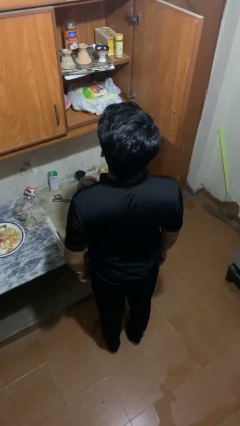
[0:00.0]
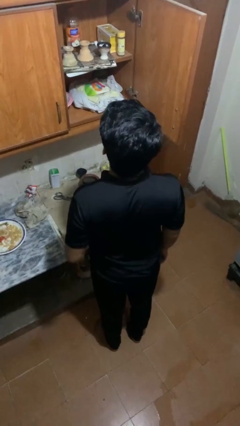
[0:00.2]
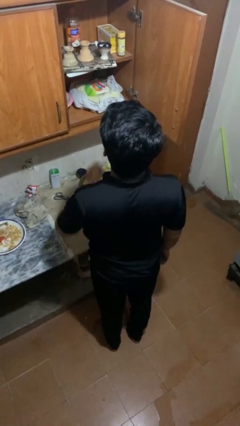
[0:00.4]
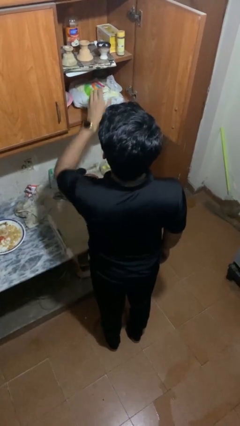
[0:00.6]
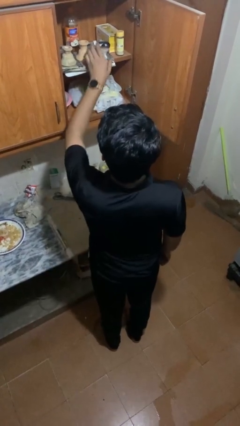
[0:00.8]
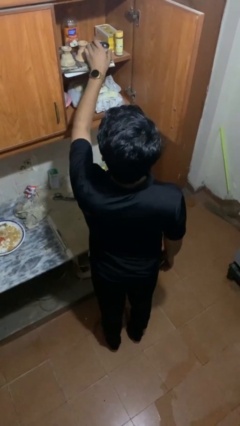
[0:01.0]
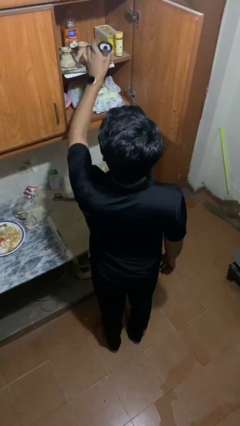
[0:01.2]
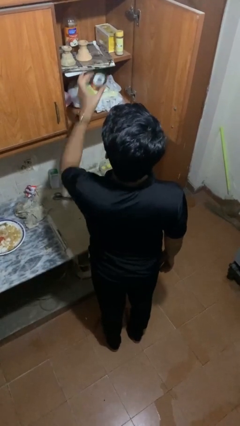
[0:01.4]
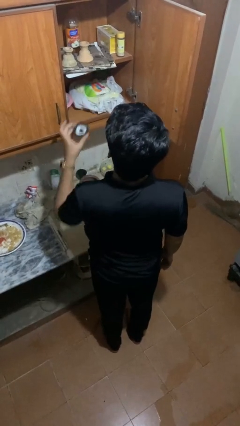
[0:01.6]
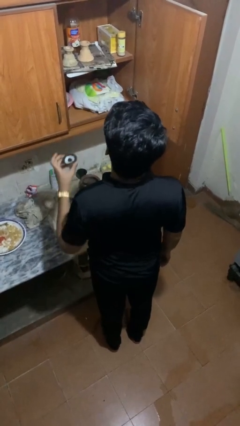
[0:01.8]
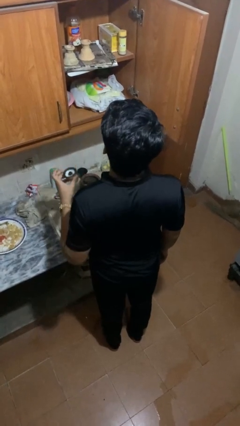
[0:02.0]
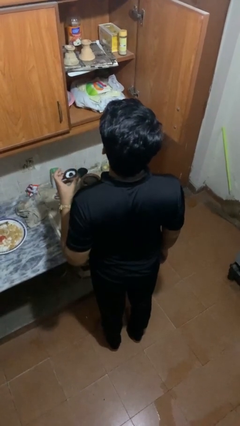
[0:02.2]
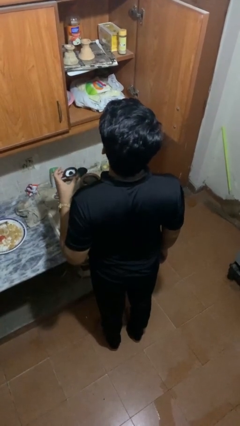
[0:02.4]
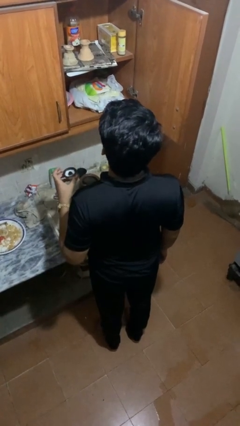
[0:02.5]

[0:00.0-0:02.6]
person takes object from cabinet

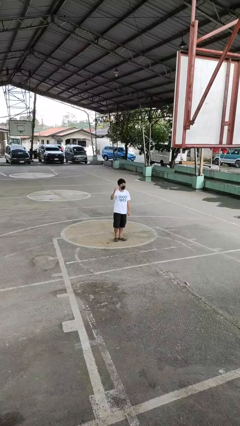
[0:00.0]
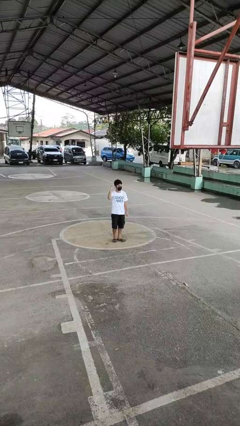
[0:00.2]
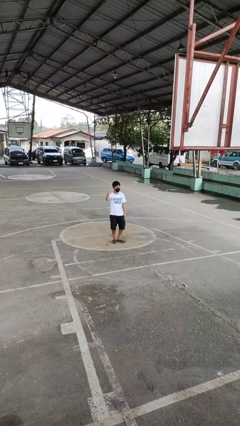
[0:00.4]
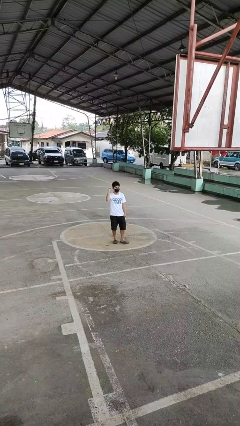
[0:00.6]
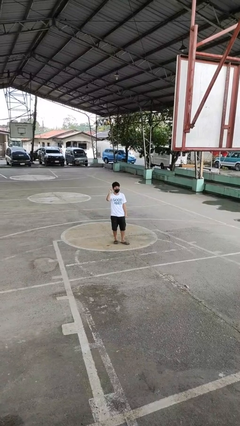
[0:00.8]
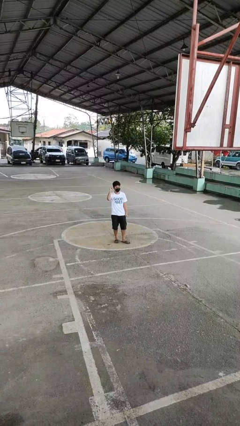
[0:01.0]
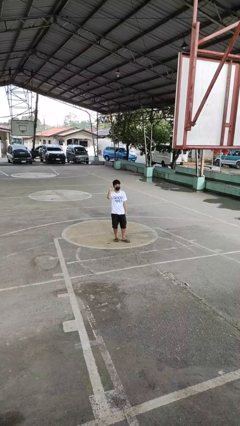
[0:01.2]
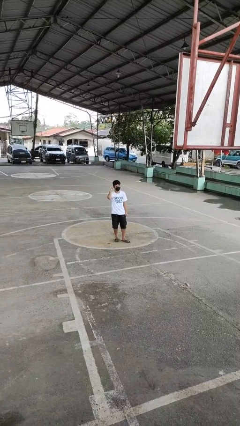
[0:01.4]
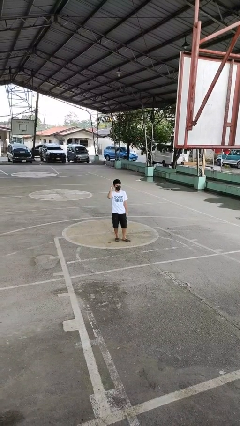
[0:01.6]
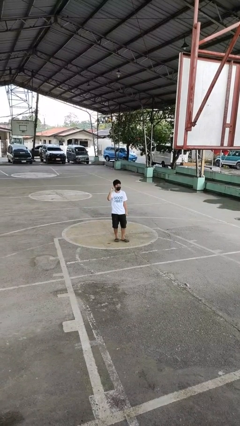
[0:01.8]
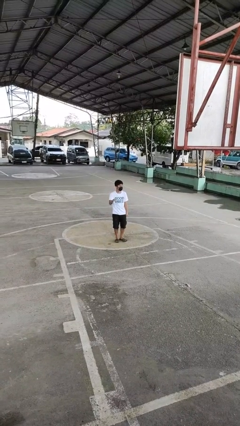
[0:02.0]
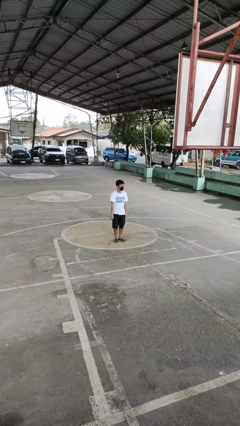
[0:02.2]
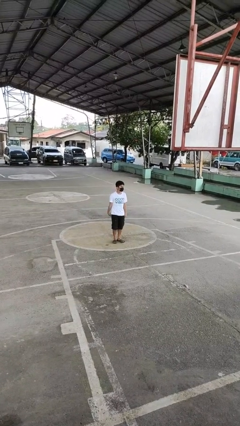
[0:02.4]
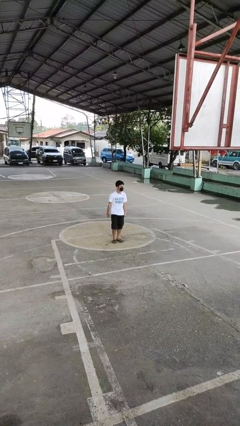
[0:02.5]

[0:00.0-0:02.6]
person gestures behind me

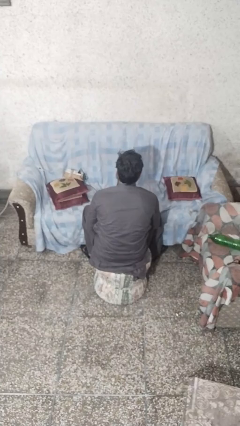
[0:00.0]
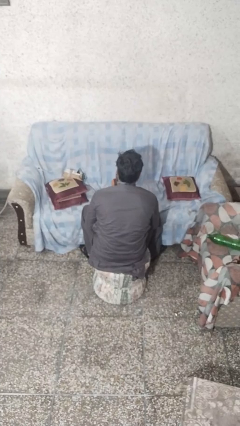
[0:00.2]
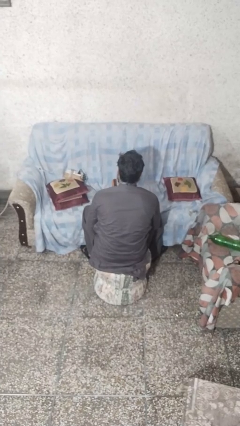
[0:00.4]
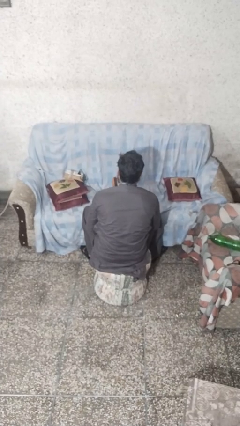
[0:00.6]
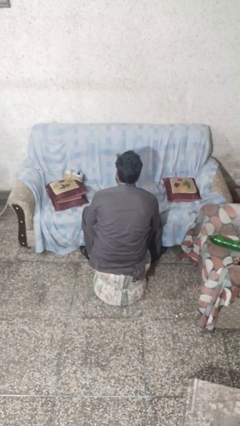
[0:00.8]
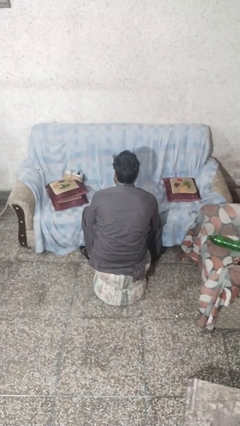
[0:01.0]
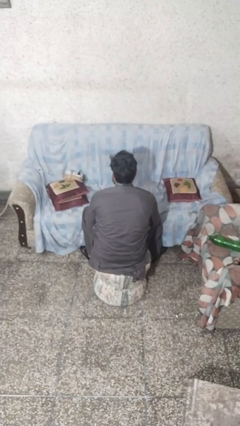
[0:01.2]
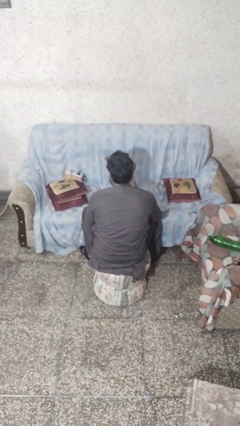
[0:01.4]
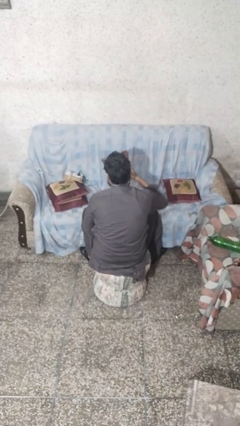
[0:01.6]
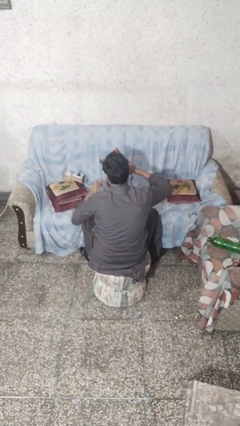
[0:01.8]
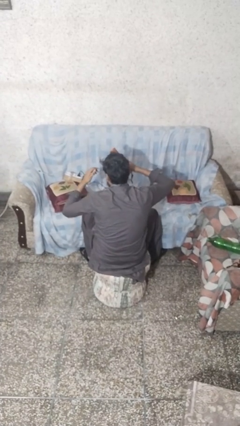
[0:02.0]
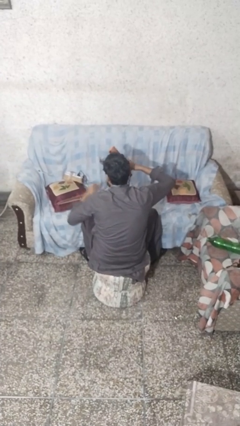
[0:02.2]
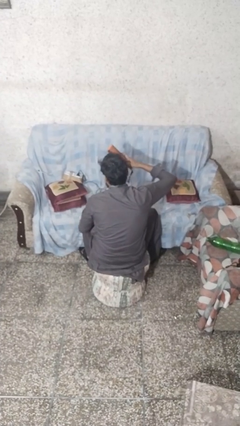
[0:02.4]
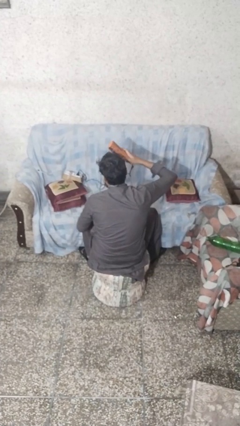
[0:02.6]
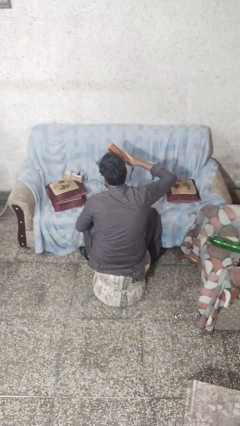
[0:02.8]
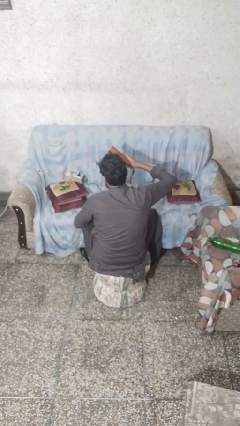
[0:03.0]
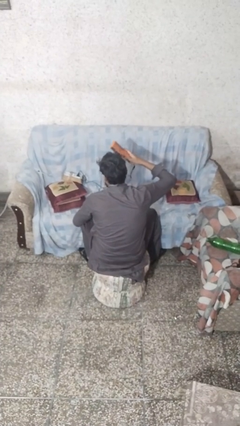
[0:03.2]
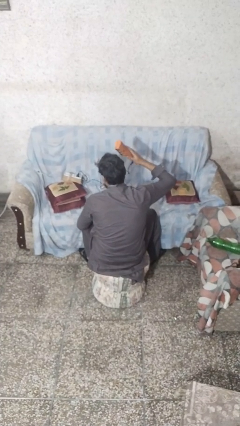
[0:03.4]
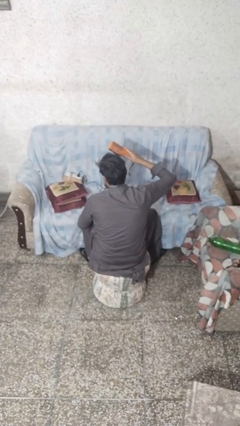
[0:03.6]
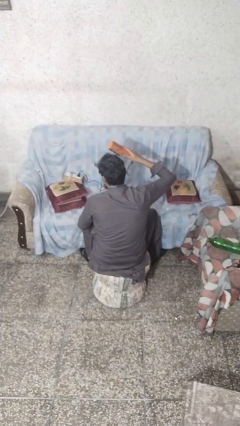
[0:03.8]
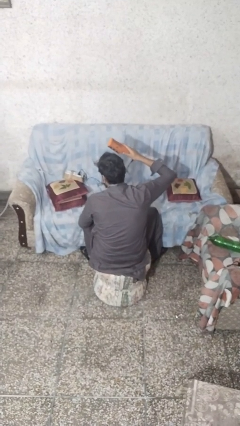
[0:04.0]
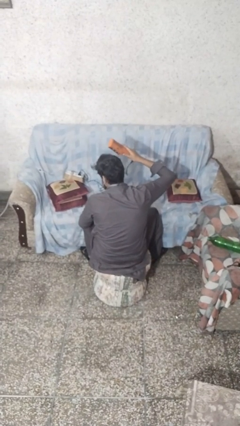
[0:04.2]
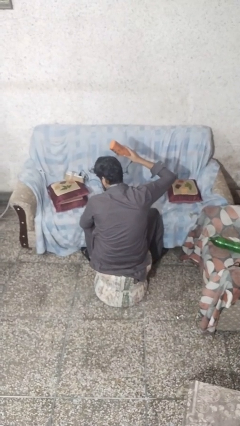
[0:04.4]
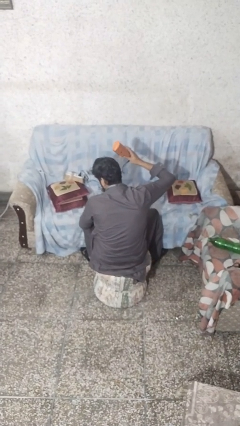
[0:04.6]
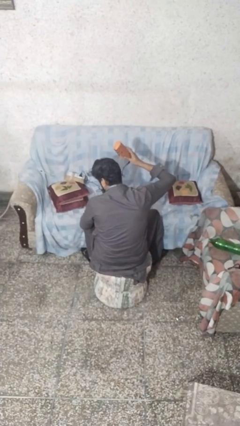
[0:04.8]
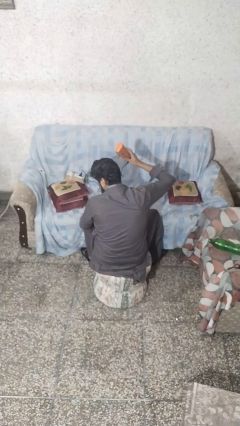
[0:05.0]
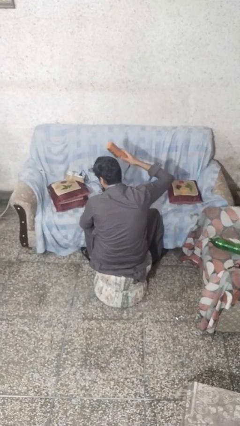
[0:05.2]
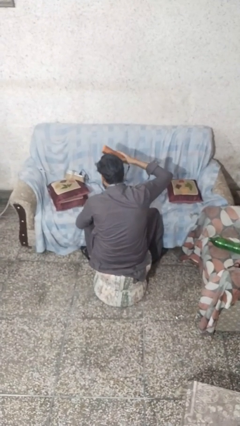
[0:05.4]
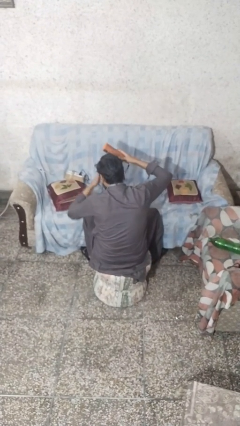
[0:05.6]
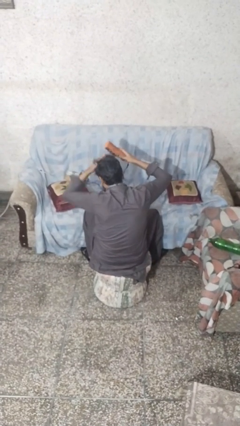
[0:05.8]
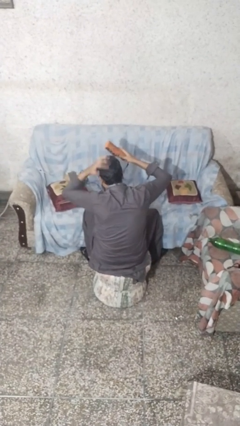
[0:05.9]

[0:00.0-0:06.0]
person dries hair with hairdryer

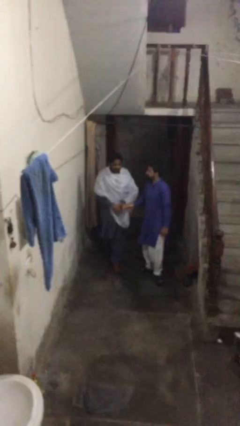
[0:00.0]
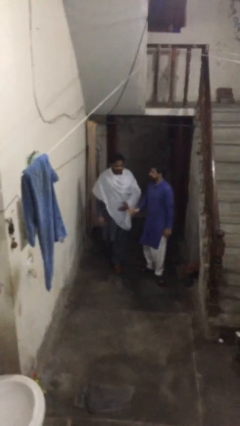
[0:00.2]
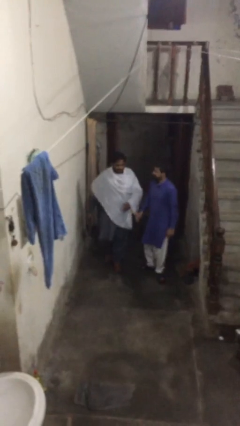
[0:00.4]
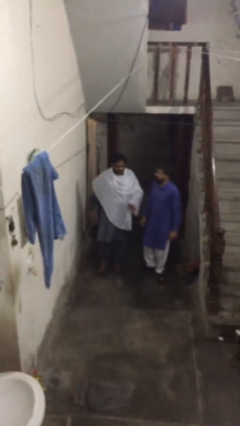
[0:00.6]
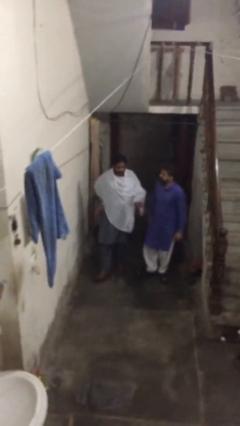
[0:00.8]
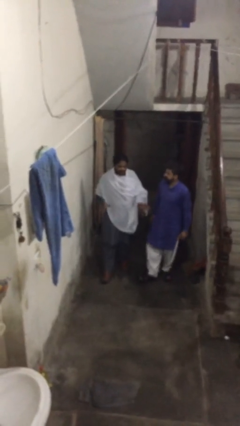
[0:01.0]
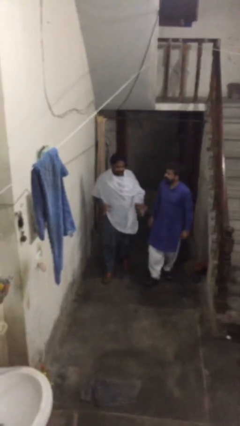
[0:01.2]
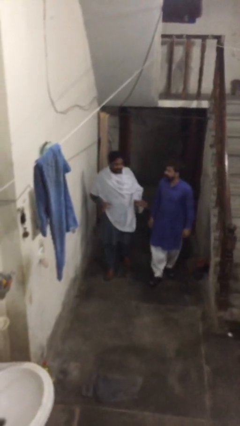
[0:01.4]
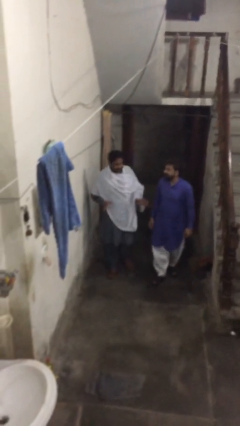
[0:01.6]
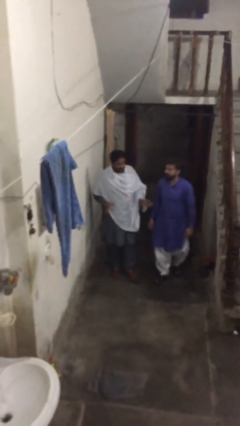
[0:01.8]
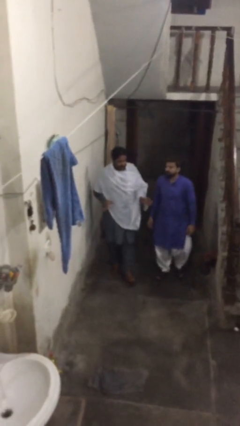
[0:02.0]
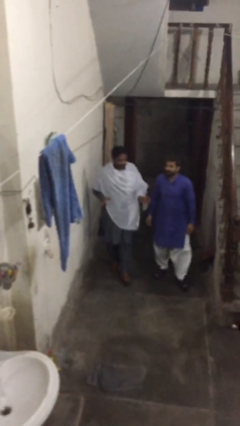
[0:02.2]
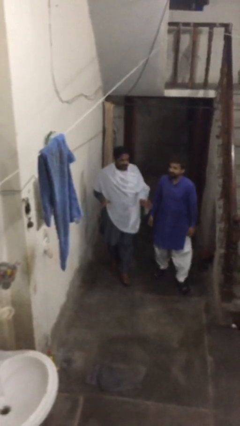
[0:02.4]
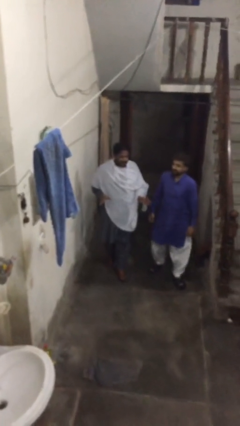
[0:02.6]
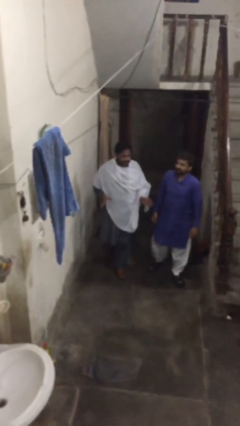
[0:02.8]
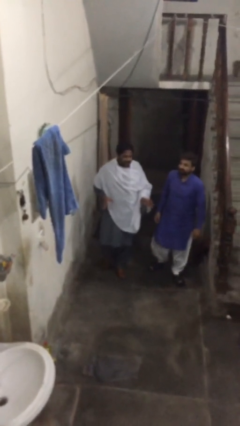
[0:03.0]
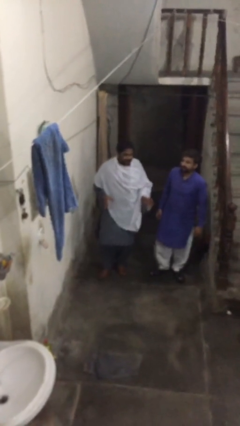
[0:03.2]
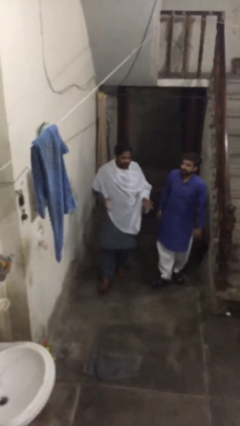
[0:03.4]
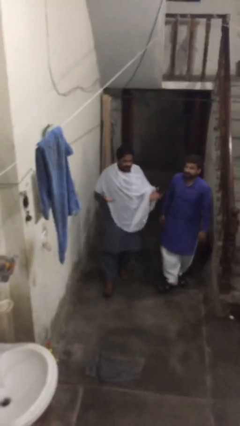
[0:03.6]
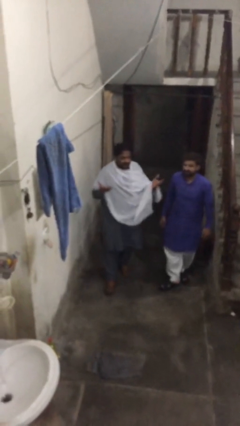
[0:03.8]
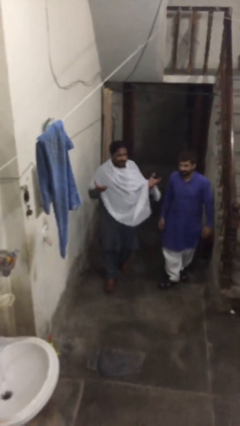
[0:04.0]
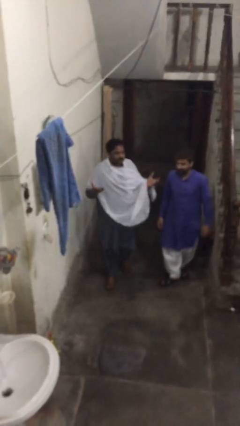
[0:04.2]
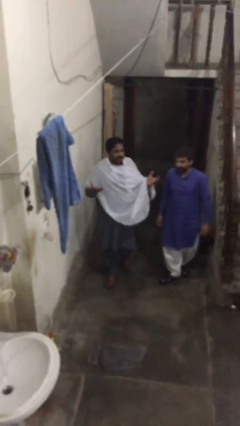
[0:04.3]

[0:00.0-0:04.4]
person talks to person

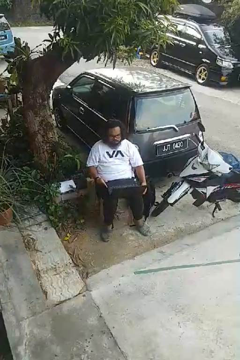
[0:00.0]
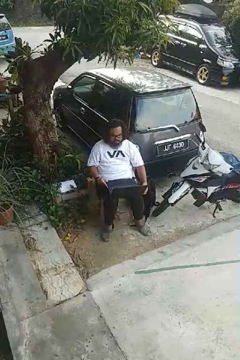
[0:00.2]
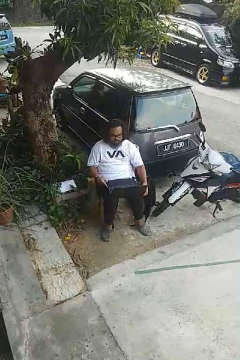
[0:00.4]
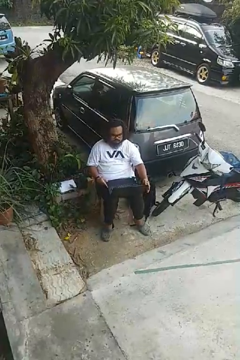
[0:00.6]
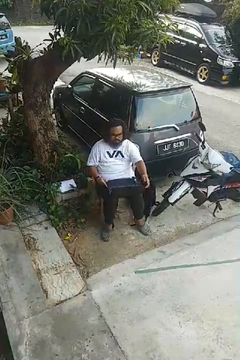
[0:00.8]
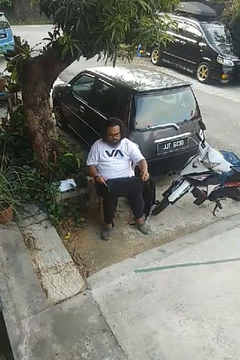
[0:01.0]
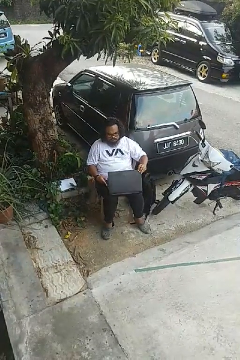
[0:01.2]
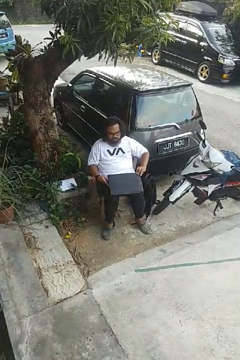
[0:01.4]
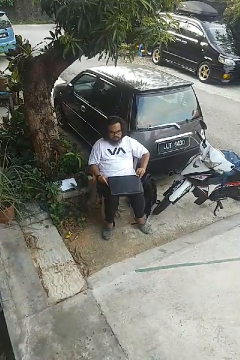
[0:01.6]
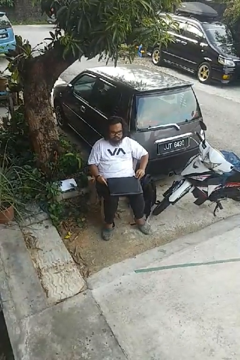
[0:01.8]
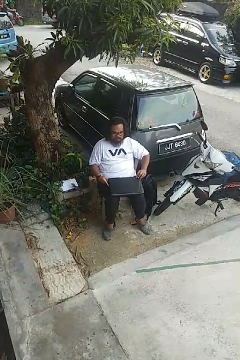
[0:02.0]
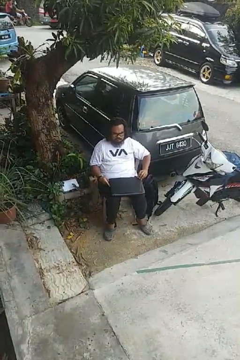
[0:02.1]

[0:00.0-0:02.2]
person closes laptop
